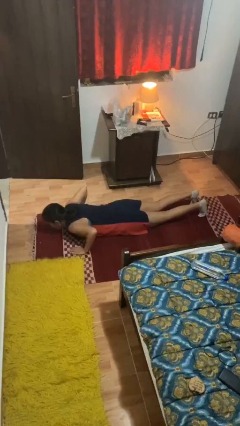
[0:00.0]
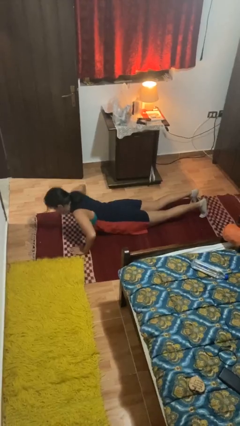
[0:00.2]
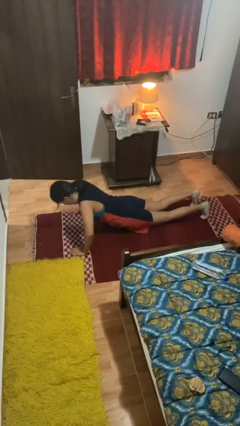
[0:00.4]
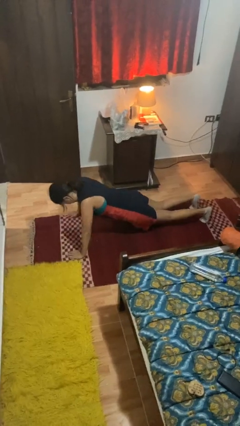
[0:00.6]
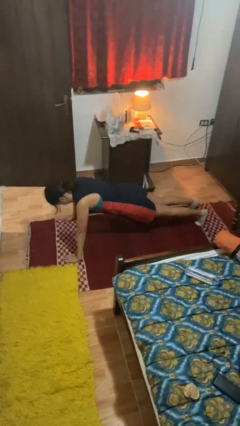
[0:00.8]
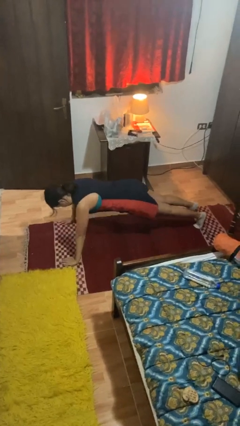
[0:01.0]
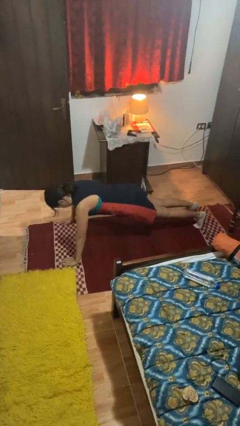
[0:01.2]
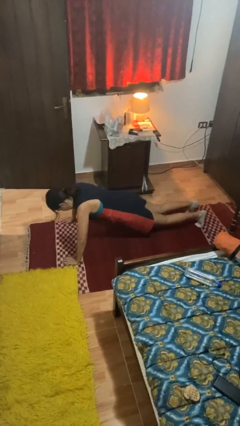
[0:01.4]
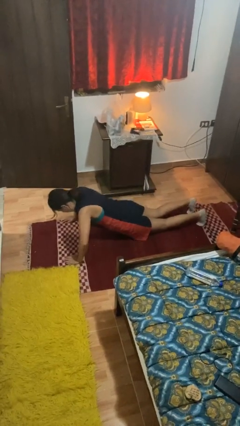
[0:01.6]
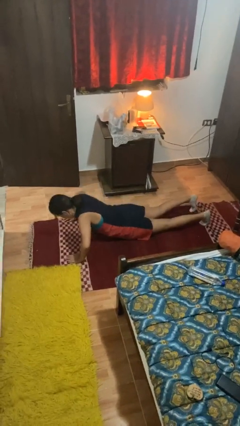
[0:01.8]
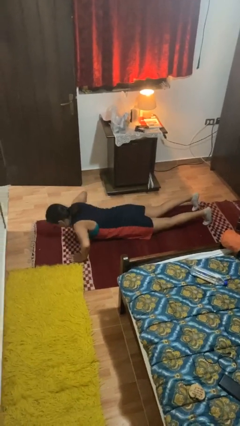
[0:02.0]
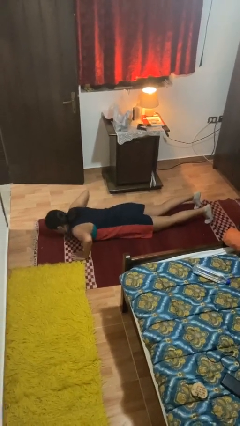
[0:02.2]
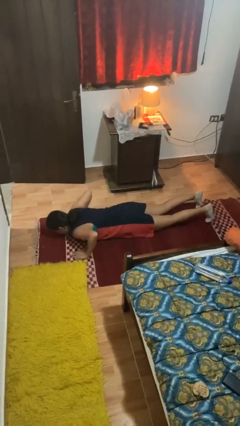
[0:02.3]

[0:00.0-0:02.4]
person exercises with pushup

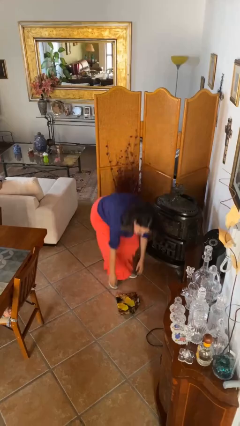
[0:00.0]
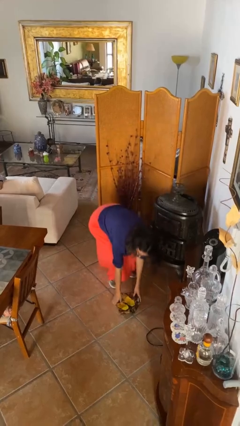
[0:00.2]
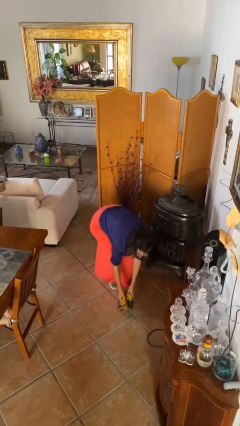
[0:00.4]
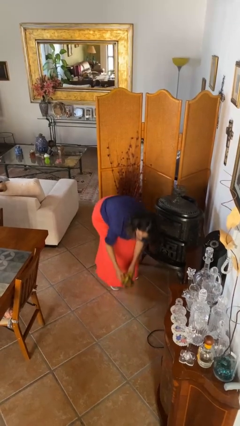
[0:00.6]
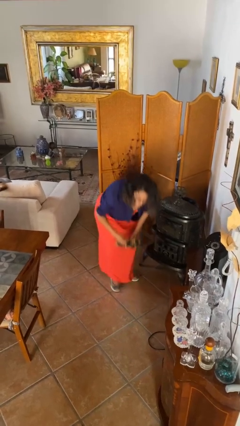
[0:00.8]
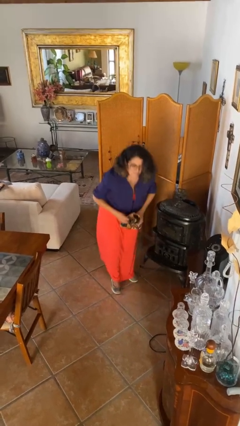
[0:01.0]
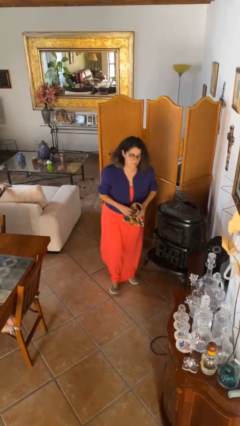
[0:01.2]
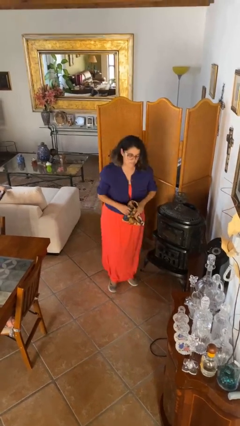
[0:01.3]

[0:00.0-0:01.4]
person picks up object from floor

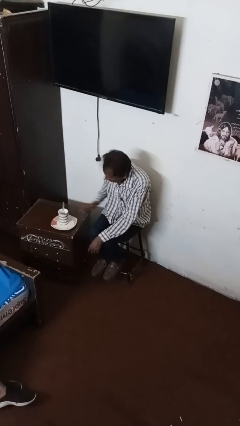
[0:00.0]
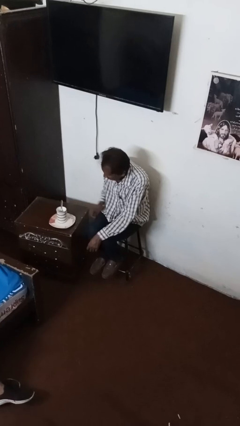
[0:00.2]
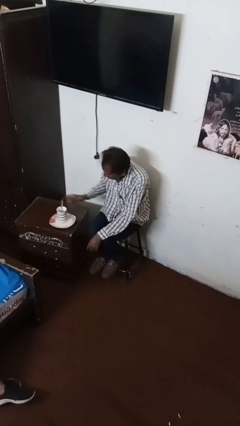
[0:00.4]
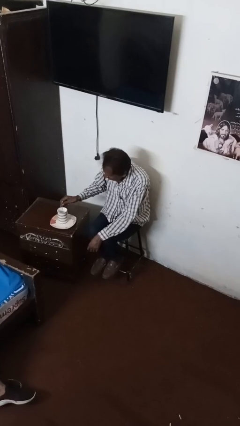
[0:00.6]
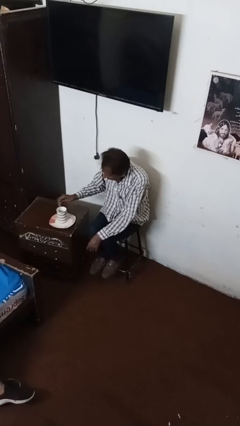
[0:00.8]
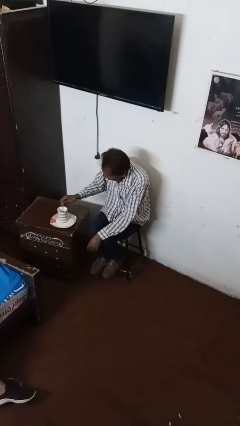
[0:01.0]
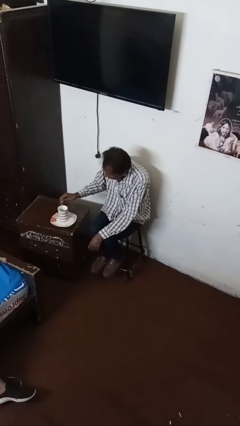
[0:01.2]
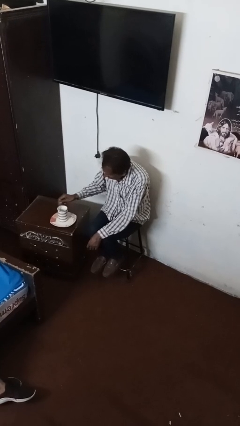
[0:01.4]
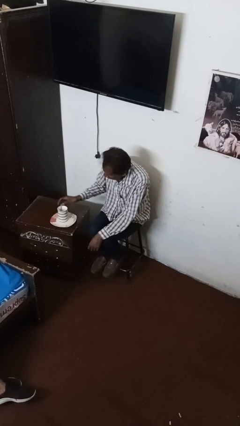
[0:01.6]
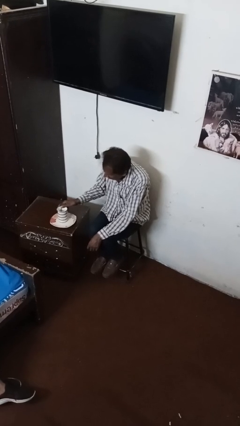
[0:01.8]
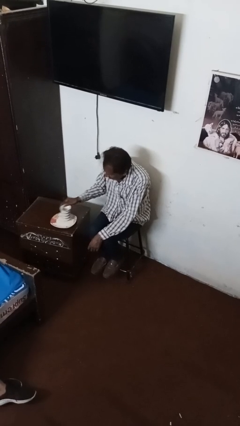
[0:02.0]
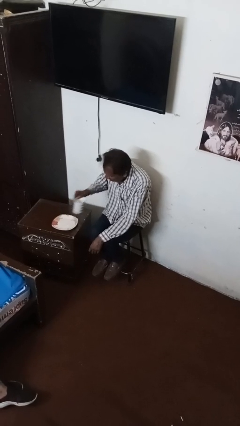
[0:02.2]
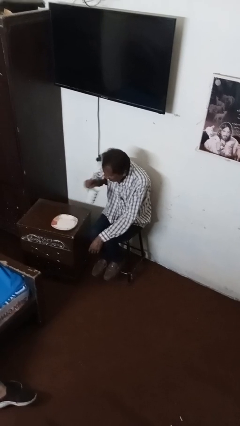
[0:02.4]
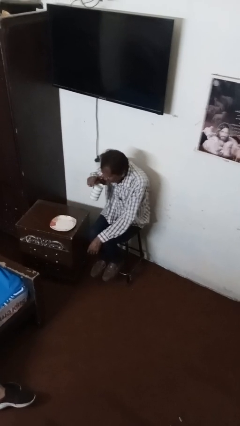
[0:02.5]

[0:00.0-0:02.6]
person stirs mug

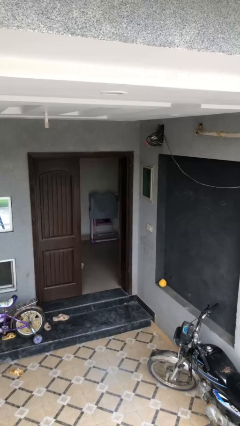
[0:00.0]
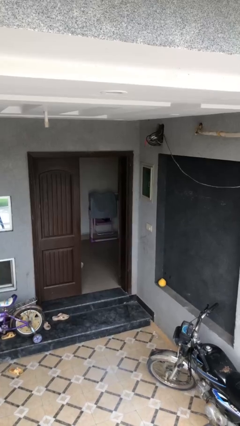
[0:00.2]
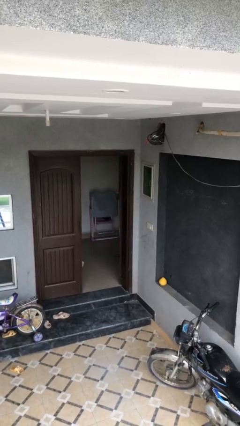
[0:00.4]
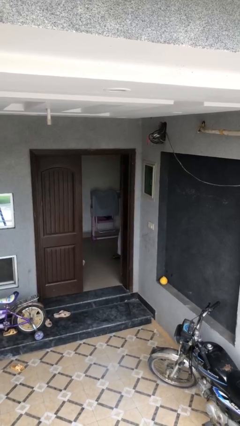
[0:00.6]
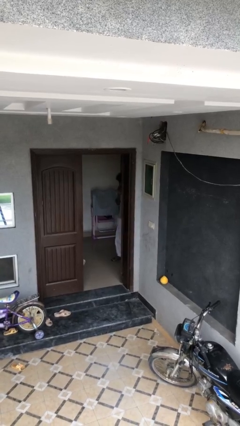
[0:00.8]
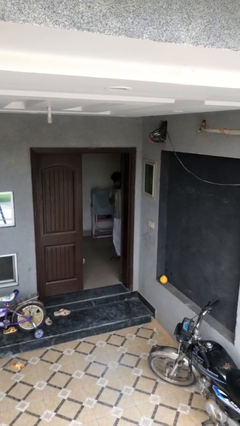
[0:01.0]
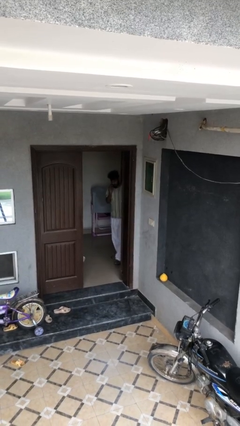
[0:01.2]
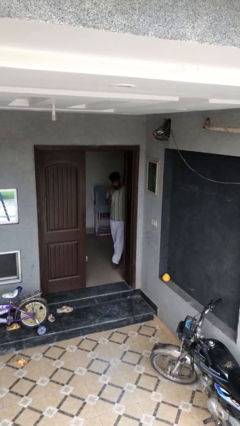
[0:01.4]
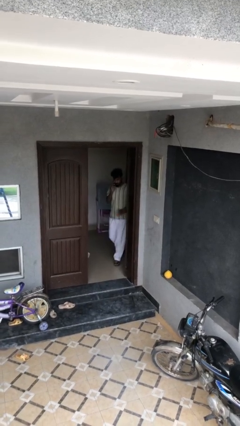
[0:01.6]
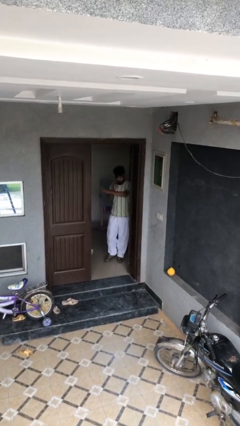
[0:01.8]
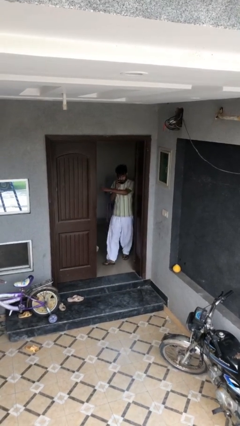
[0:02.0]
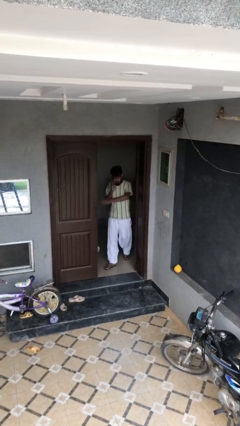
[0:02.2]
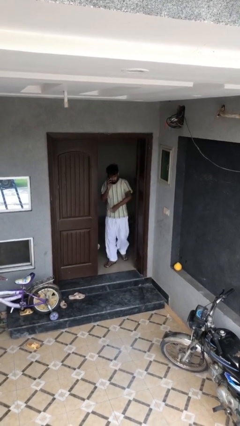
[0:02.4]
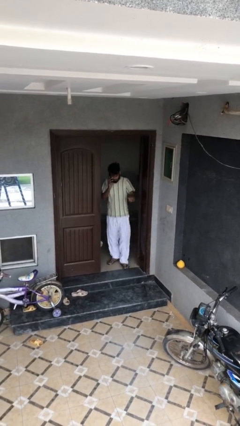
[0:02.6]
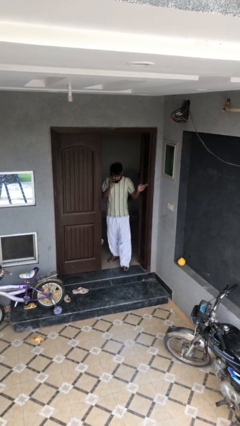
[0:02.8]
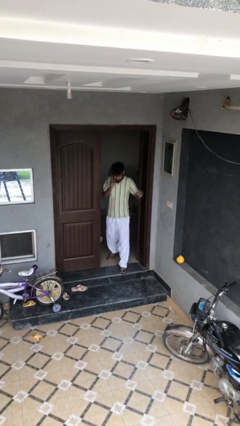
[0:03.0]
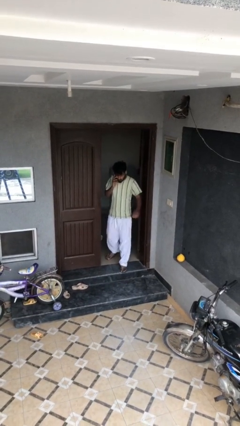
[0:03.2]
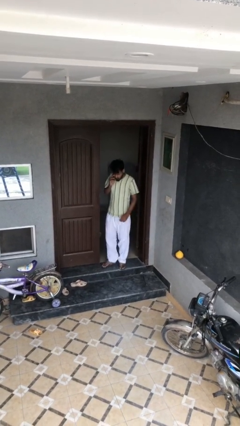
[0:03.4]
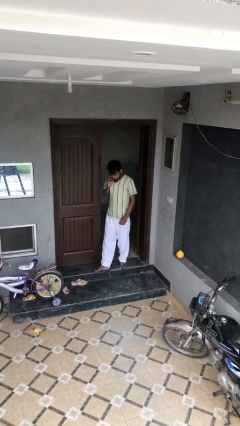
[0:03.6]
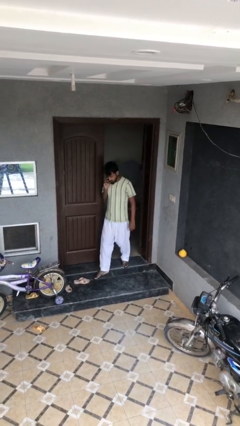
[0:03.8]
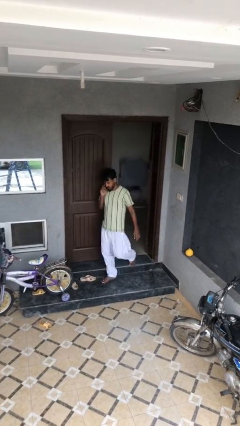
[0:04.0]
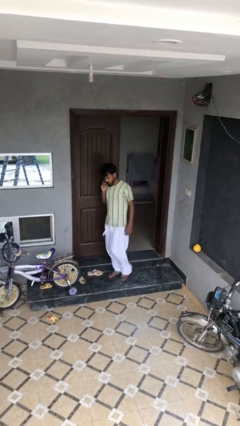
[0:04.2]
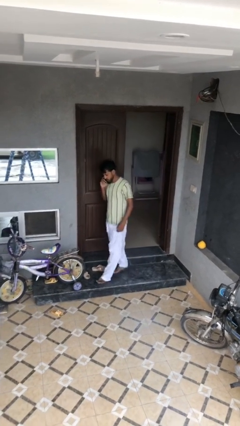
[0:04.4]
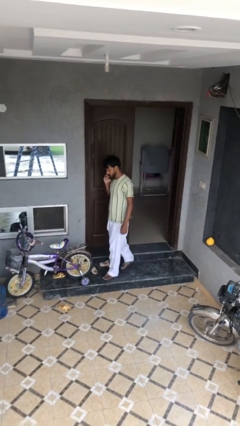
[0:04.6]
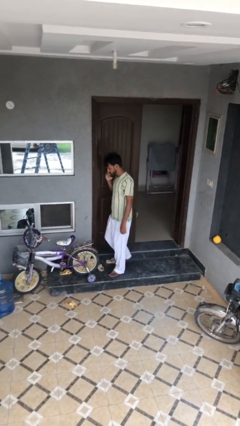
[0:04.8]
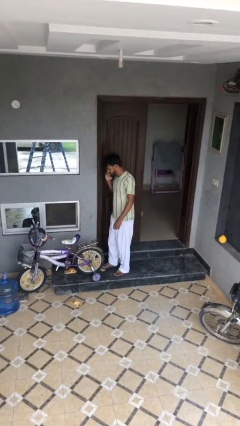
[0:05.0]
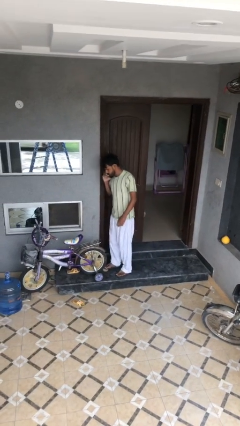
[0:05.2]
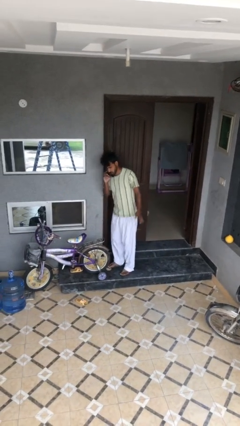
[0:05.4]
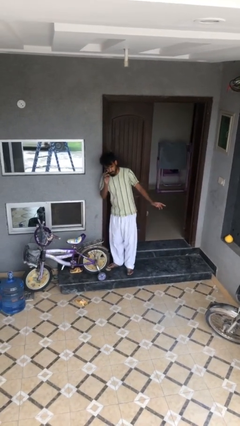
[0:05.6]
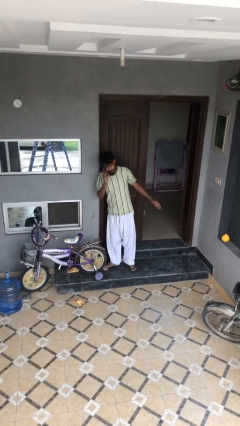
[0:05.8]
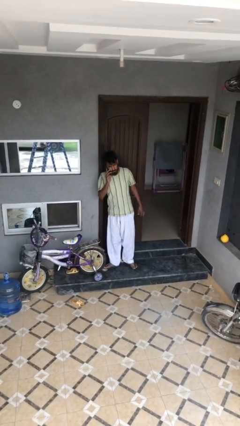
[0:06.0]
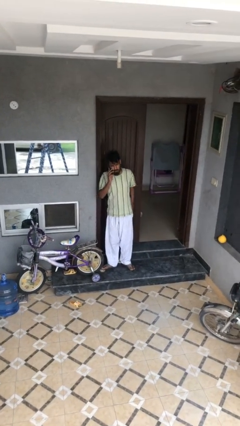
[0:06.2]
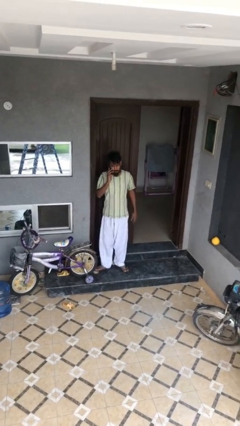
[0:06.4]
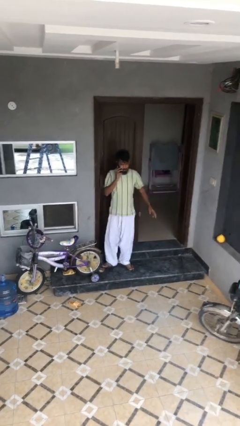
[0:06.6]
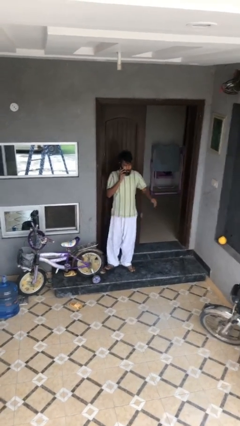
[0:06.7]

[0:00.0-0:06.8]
person enters scene through structure

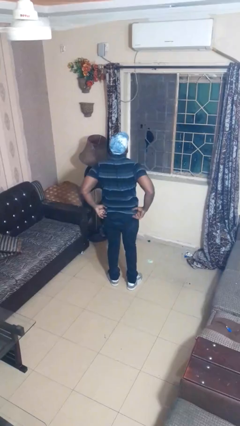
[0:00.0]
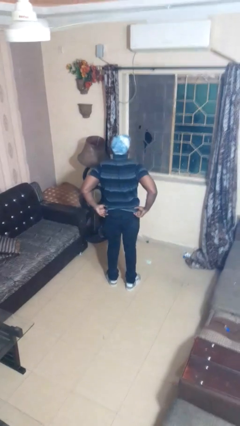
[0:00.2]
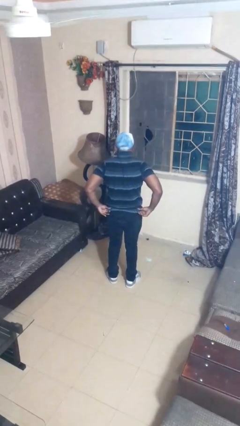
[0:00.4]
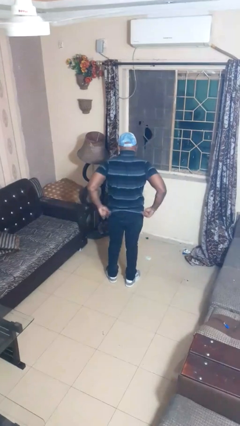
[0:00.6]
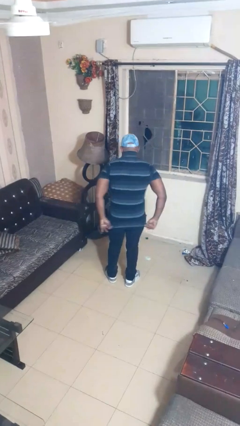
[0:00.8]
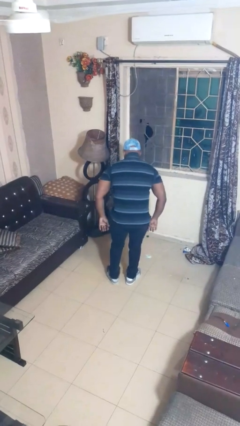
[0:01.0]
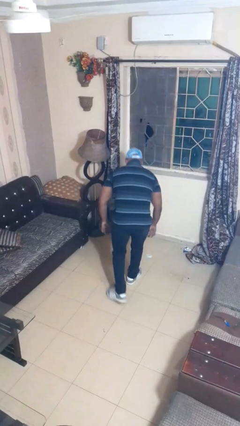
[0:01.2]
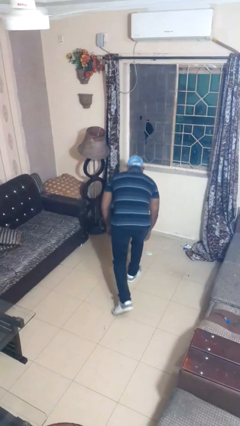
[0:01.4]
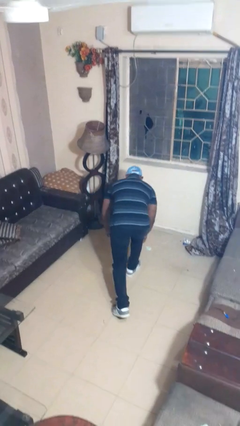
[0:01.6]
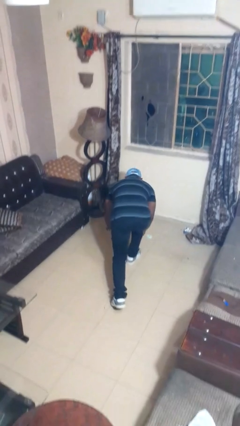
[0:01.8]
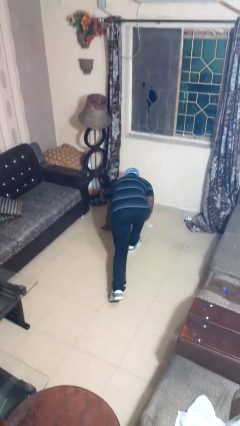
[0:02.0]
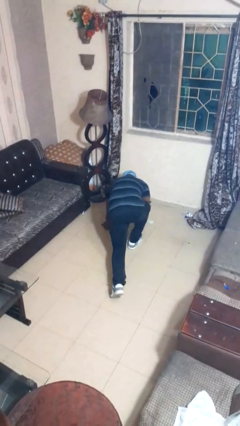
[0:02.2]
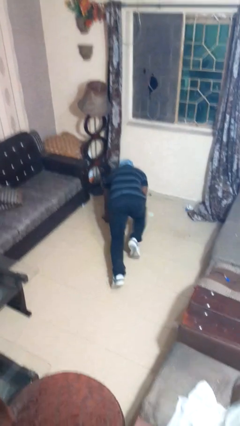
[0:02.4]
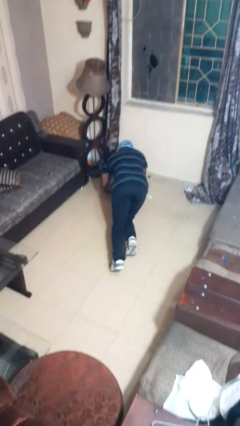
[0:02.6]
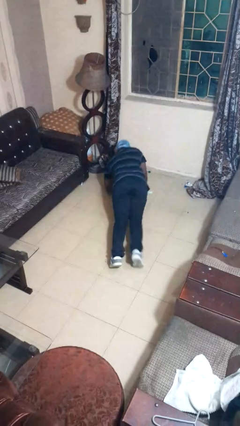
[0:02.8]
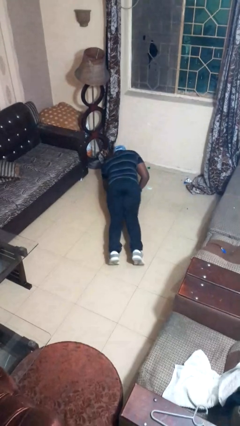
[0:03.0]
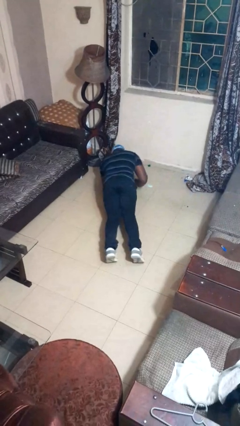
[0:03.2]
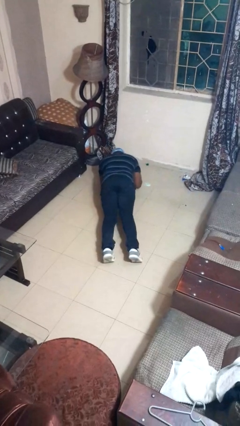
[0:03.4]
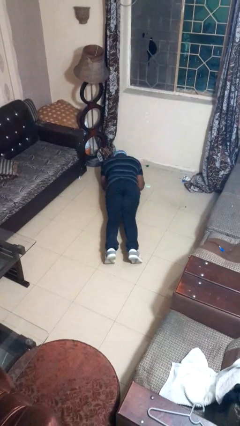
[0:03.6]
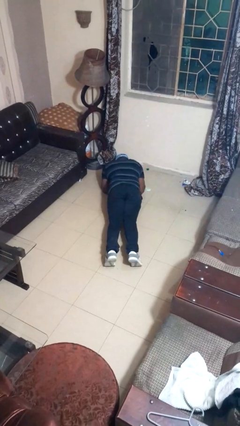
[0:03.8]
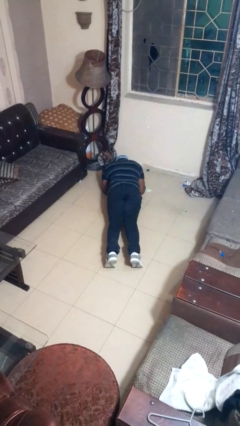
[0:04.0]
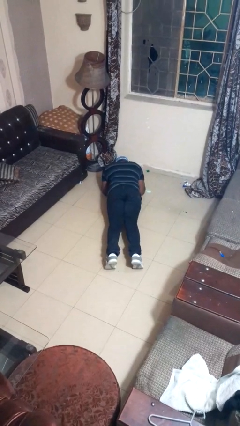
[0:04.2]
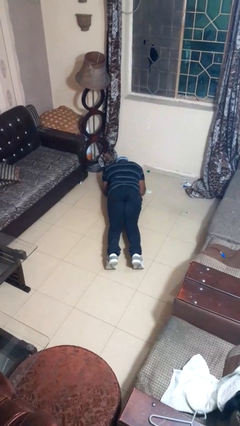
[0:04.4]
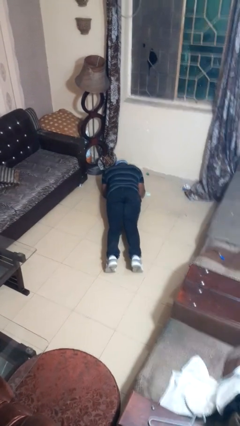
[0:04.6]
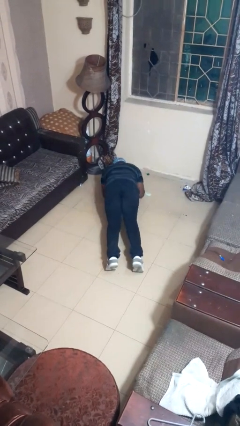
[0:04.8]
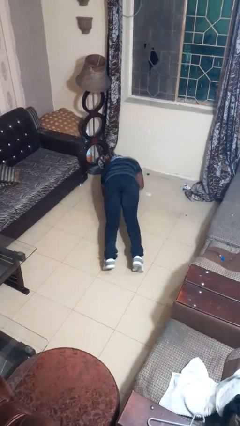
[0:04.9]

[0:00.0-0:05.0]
person exercises with plank
